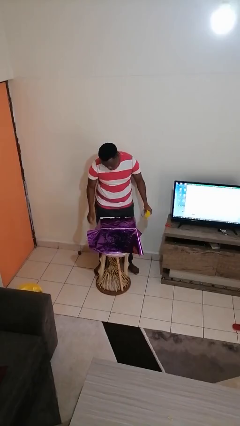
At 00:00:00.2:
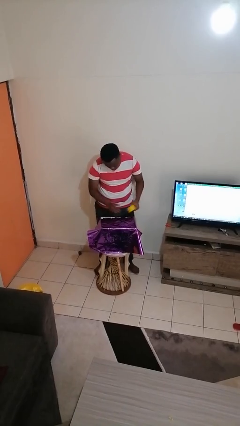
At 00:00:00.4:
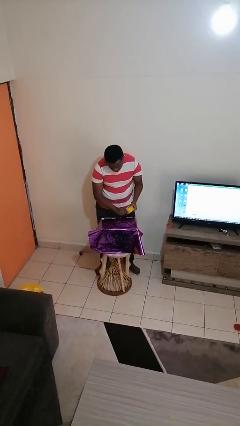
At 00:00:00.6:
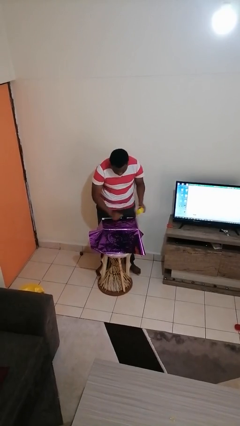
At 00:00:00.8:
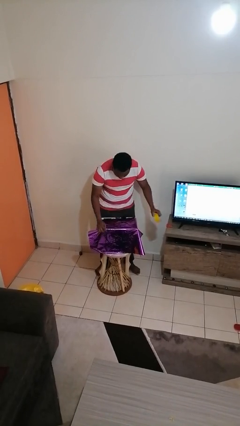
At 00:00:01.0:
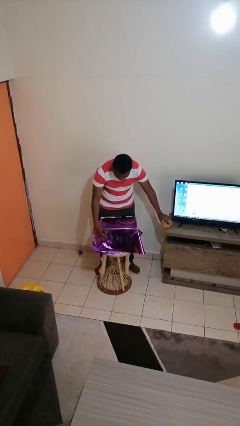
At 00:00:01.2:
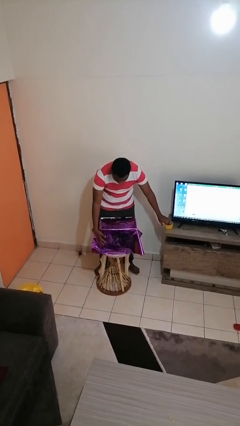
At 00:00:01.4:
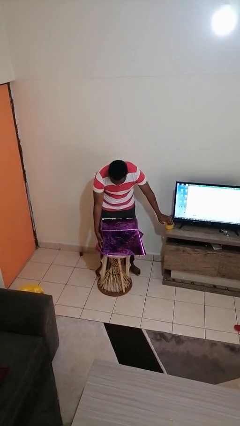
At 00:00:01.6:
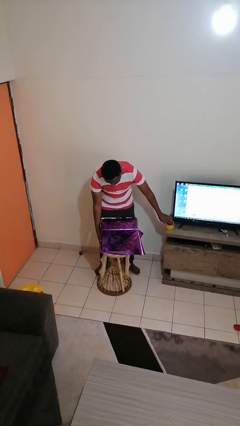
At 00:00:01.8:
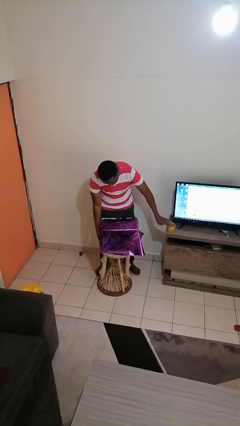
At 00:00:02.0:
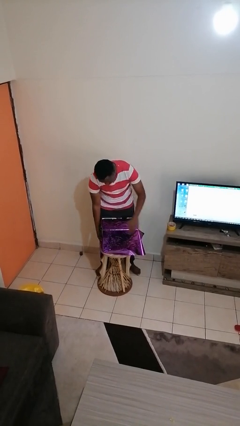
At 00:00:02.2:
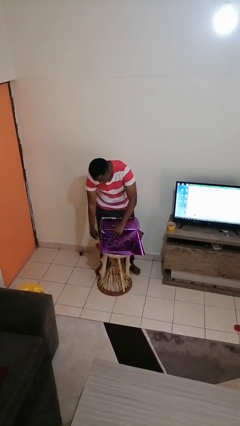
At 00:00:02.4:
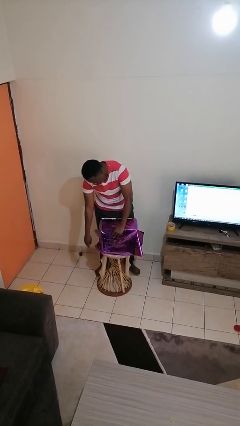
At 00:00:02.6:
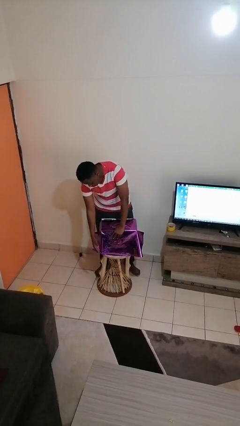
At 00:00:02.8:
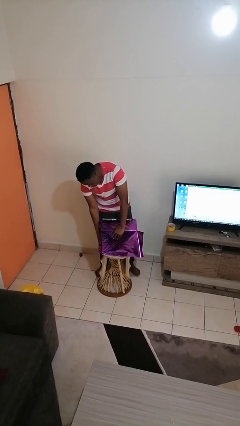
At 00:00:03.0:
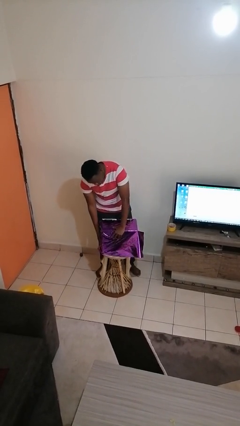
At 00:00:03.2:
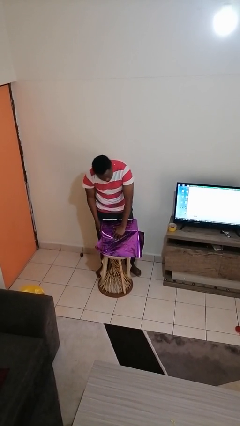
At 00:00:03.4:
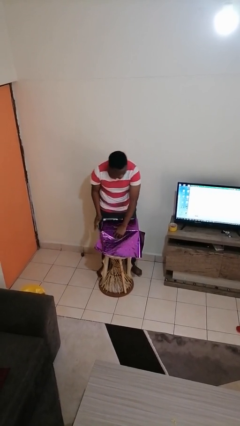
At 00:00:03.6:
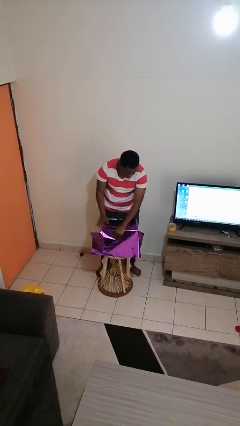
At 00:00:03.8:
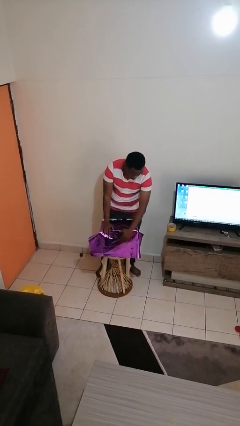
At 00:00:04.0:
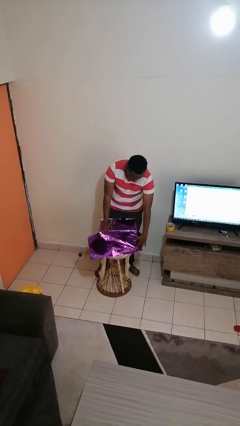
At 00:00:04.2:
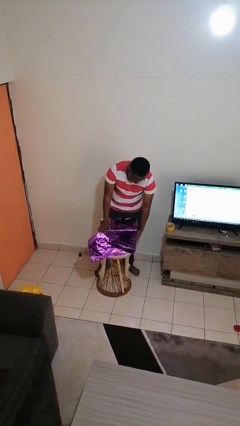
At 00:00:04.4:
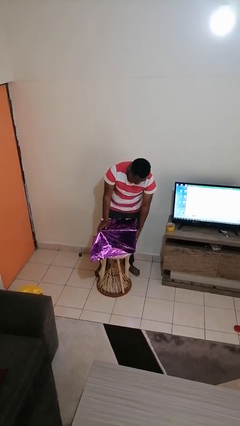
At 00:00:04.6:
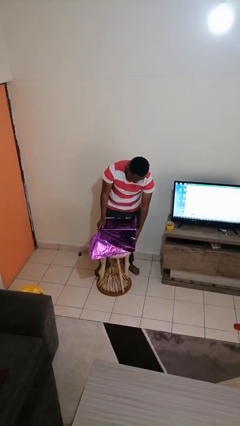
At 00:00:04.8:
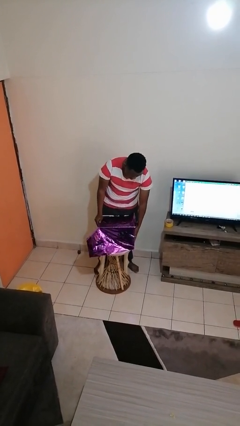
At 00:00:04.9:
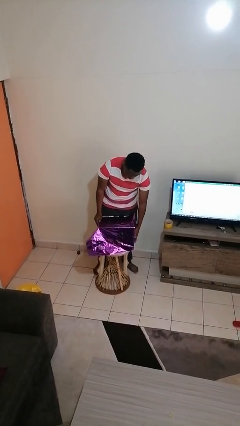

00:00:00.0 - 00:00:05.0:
person wraps box

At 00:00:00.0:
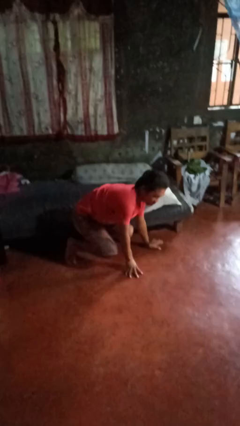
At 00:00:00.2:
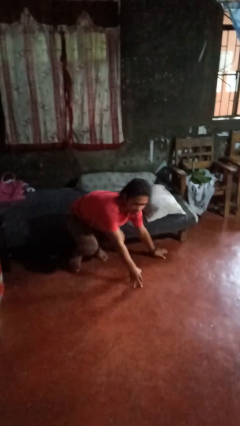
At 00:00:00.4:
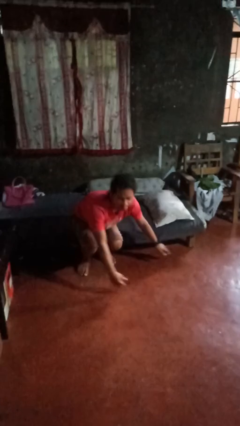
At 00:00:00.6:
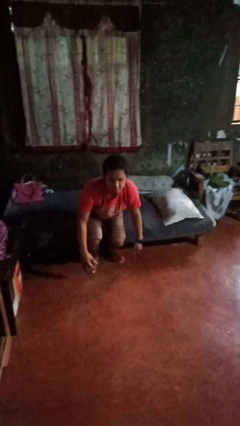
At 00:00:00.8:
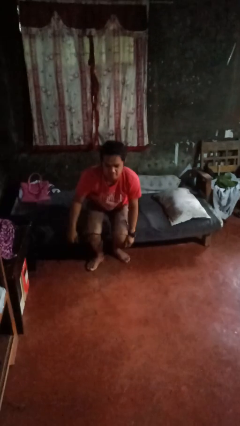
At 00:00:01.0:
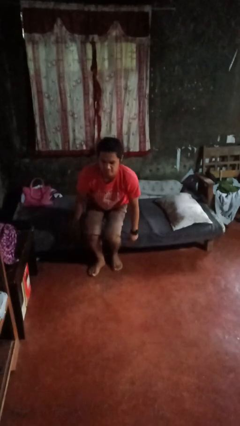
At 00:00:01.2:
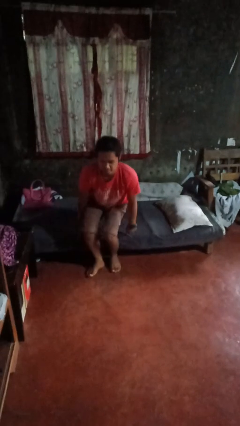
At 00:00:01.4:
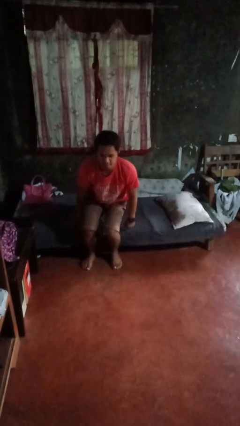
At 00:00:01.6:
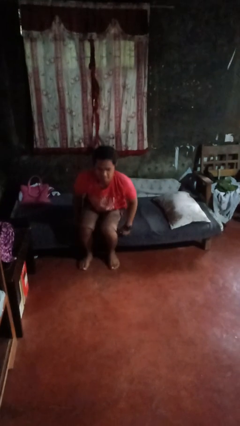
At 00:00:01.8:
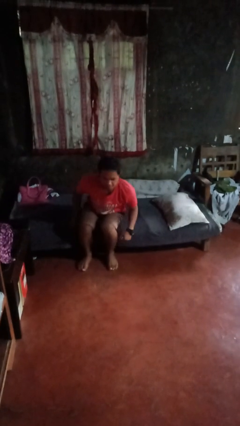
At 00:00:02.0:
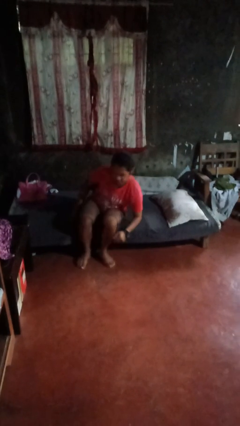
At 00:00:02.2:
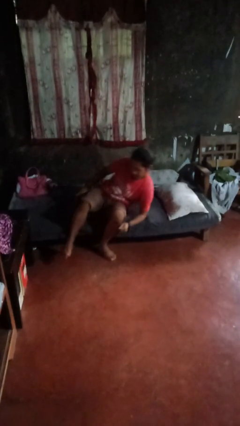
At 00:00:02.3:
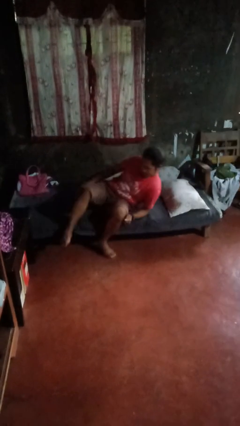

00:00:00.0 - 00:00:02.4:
person stands up from floor

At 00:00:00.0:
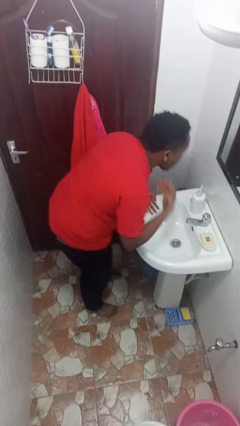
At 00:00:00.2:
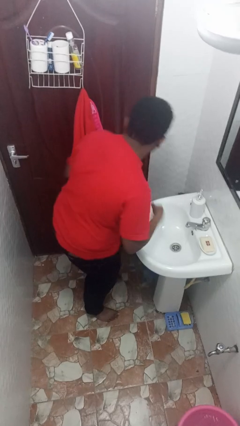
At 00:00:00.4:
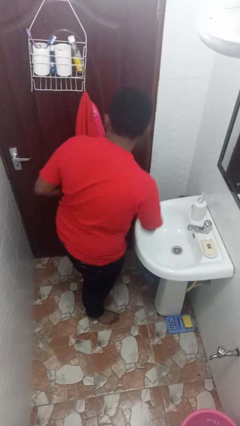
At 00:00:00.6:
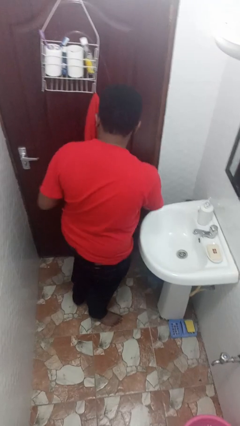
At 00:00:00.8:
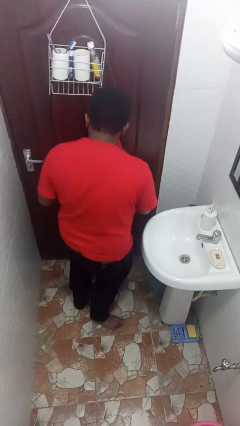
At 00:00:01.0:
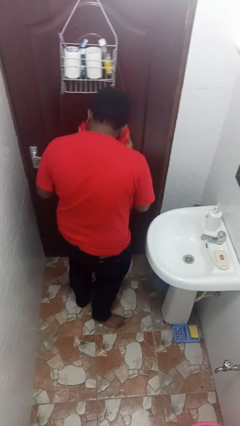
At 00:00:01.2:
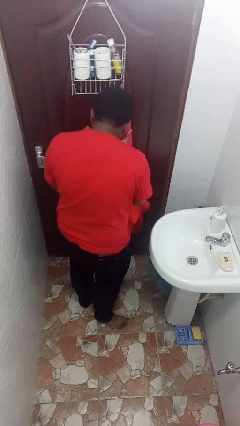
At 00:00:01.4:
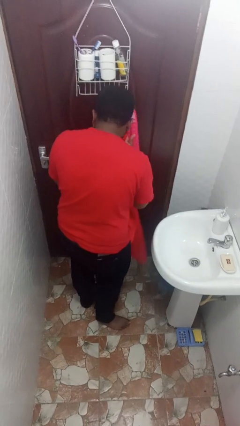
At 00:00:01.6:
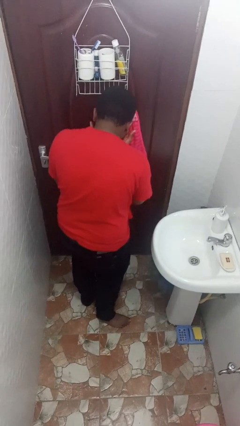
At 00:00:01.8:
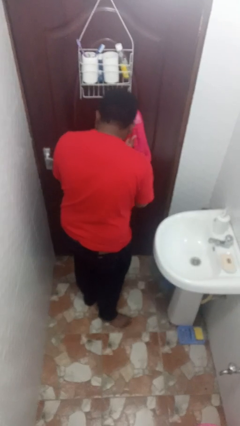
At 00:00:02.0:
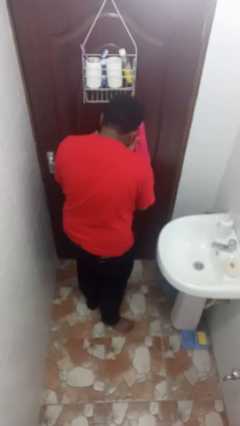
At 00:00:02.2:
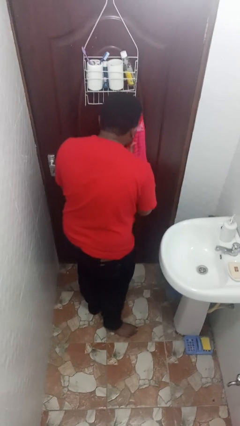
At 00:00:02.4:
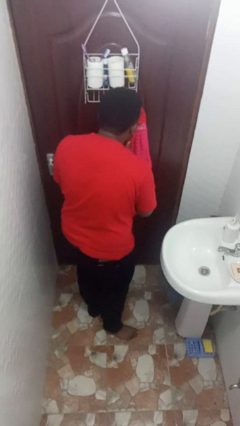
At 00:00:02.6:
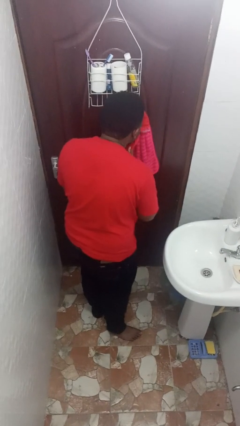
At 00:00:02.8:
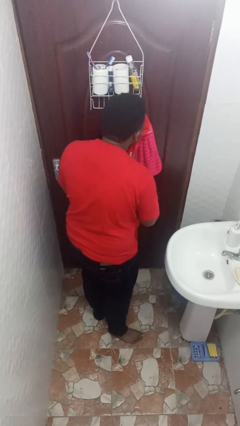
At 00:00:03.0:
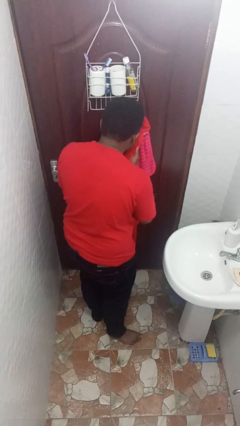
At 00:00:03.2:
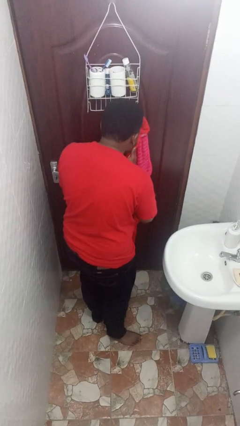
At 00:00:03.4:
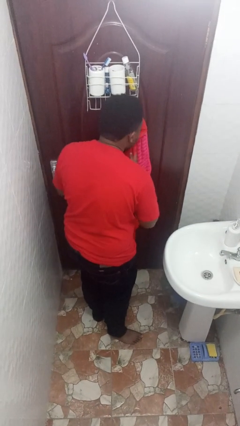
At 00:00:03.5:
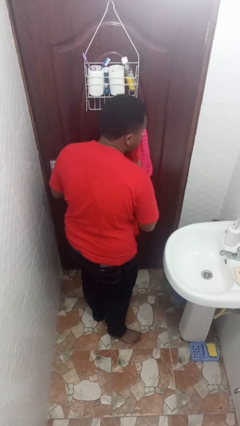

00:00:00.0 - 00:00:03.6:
person dries face with towel

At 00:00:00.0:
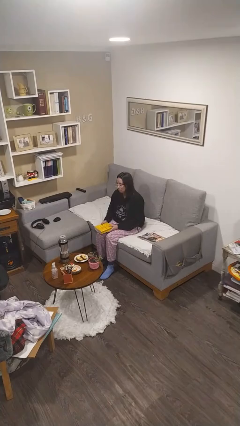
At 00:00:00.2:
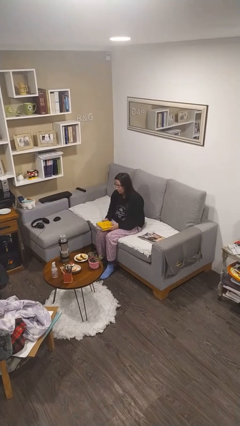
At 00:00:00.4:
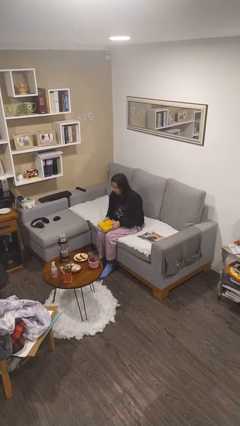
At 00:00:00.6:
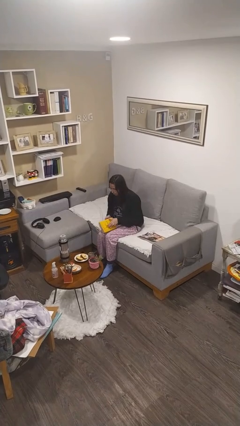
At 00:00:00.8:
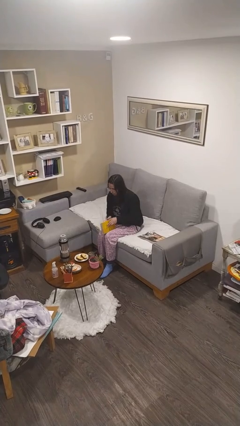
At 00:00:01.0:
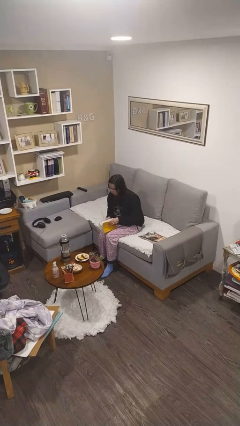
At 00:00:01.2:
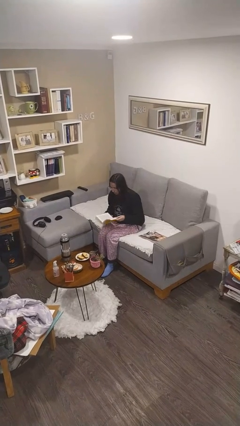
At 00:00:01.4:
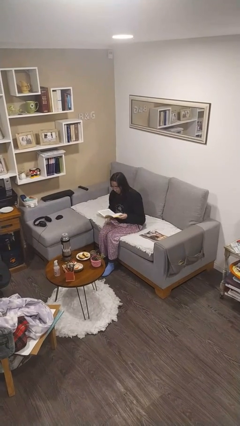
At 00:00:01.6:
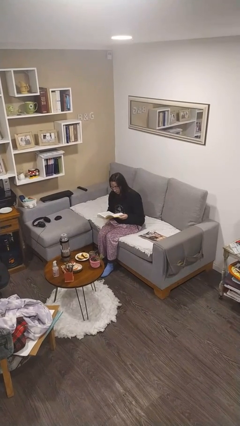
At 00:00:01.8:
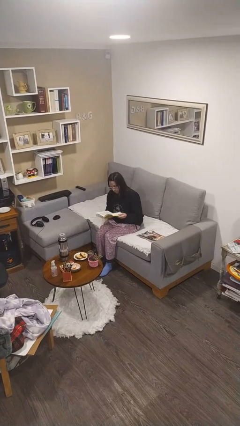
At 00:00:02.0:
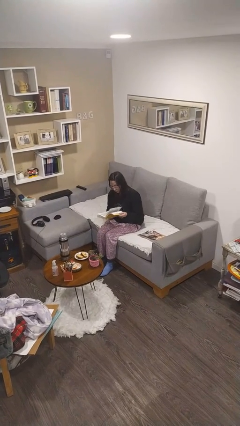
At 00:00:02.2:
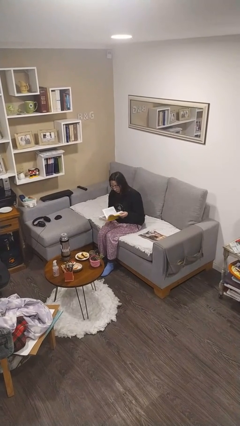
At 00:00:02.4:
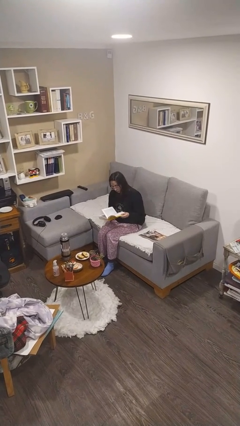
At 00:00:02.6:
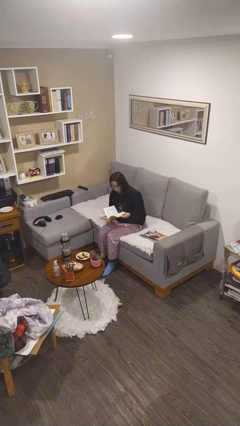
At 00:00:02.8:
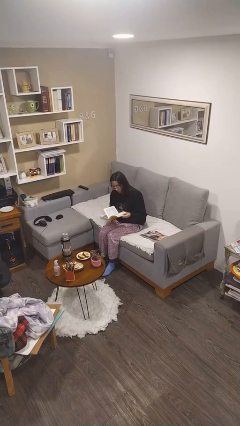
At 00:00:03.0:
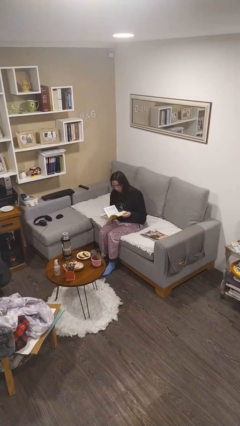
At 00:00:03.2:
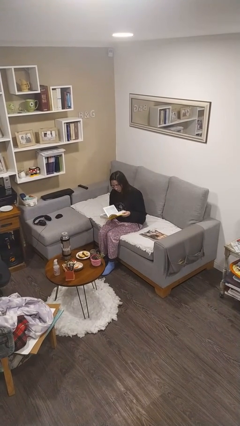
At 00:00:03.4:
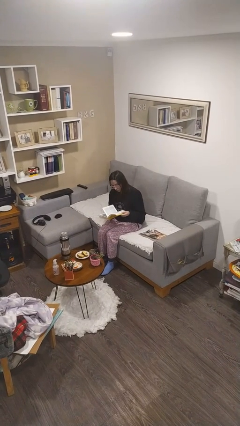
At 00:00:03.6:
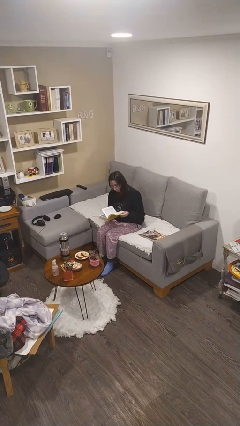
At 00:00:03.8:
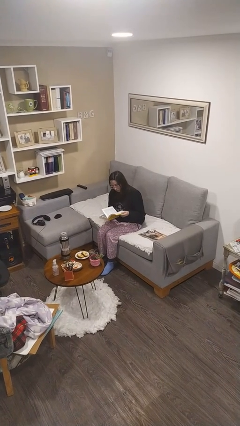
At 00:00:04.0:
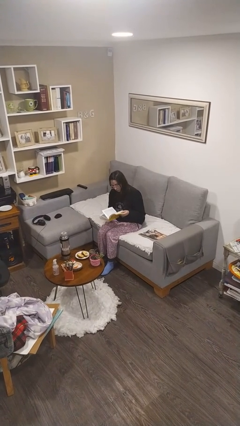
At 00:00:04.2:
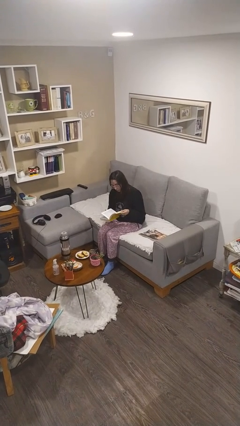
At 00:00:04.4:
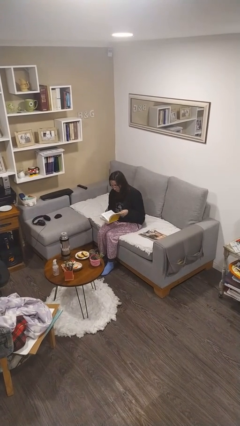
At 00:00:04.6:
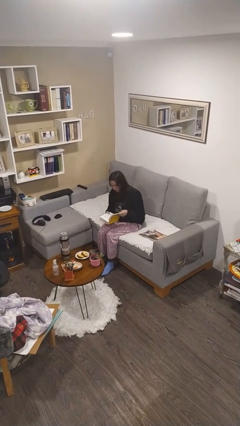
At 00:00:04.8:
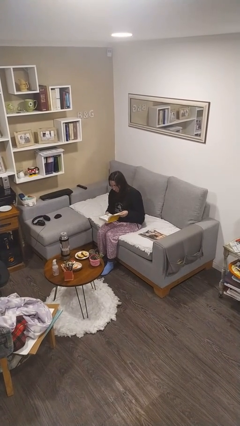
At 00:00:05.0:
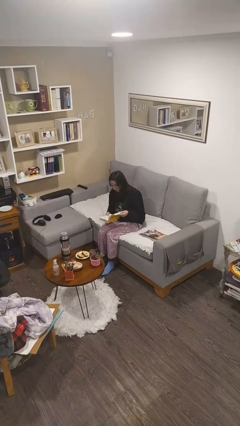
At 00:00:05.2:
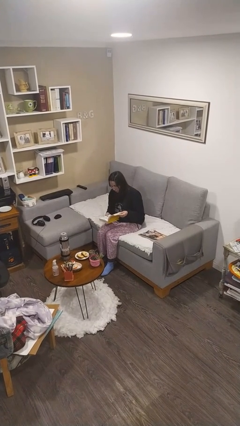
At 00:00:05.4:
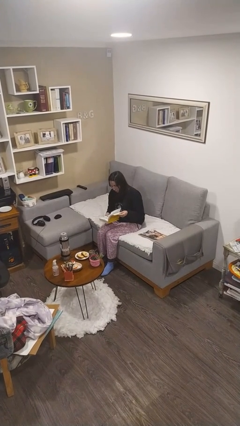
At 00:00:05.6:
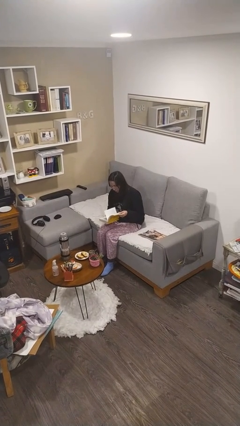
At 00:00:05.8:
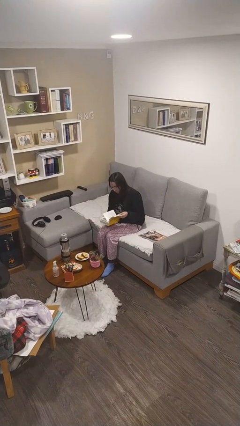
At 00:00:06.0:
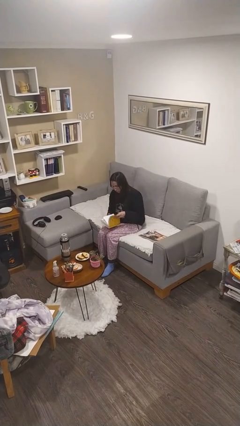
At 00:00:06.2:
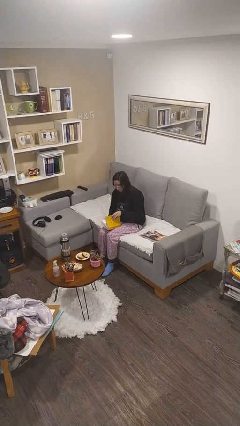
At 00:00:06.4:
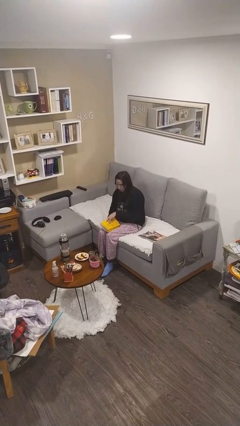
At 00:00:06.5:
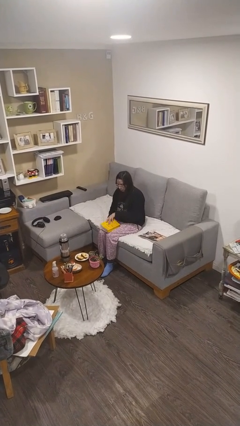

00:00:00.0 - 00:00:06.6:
person reads book
